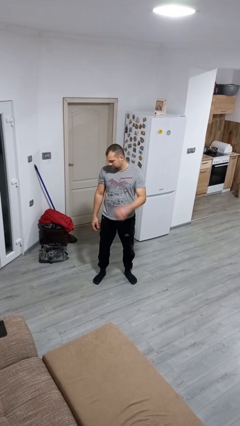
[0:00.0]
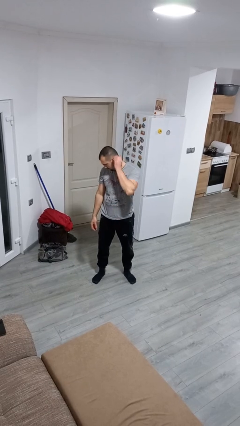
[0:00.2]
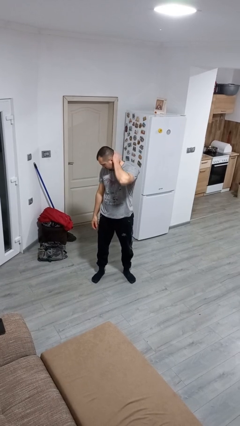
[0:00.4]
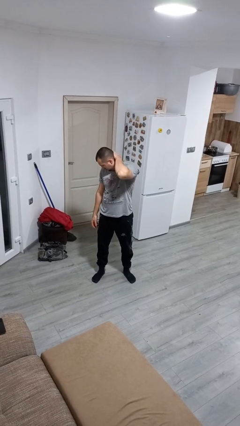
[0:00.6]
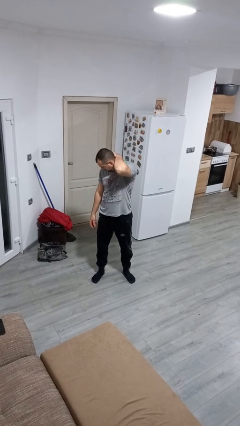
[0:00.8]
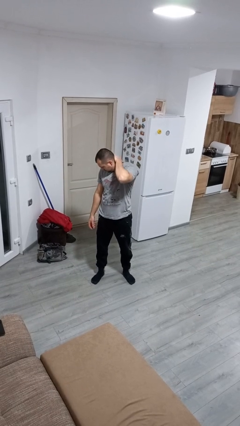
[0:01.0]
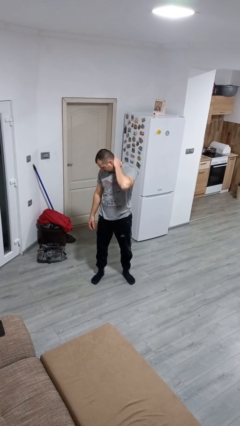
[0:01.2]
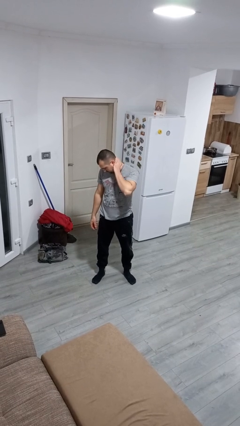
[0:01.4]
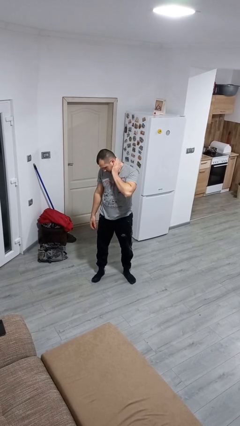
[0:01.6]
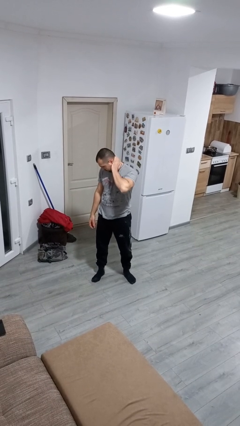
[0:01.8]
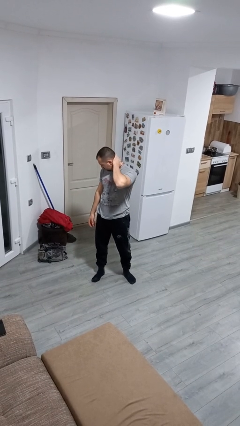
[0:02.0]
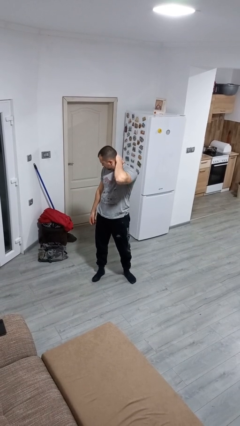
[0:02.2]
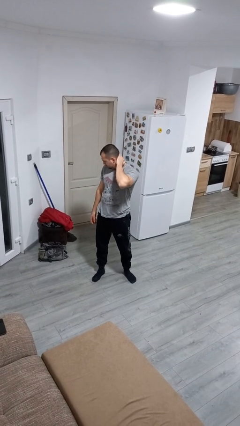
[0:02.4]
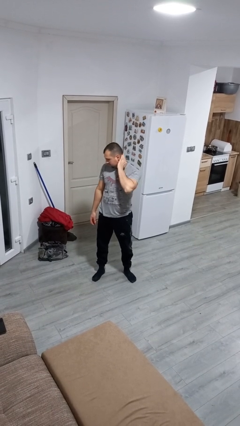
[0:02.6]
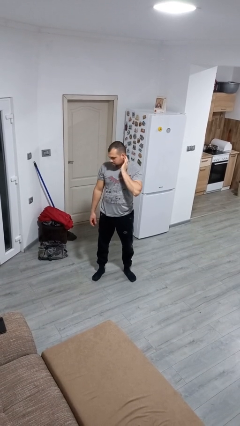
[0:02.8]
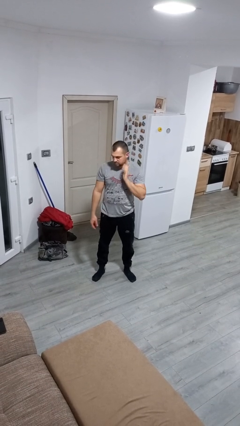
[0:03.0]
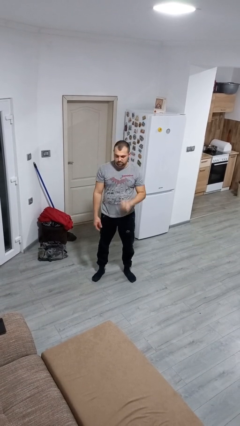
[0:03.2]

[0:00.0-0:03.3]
person rubs neck

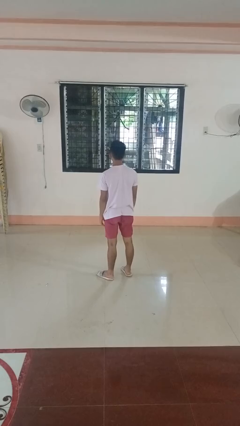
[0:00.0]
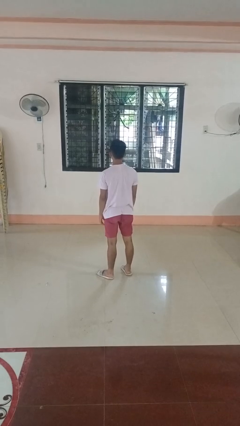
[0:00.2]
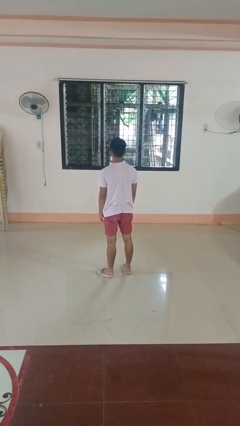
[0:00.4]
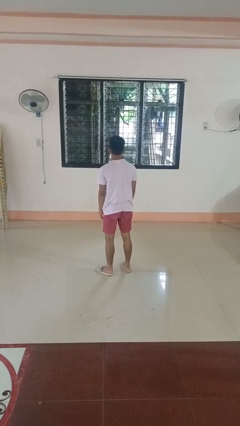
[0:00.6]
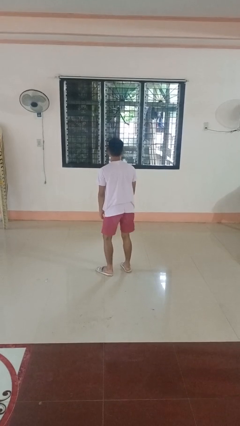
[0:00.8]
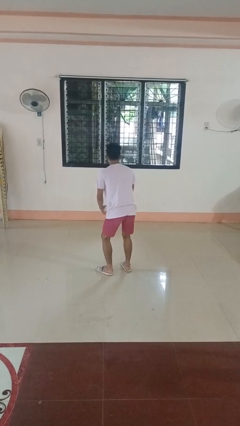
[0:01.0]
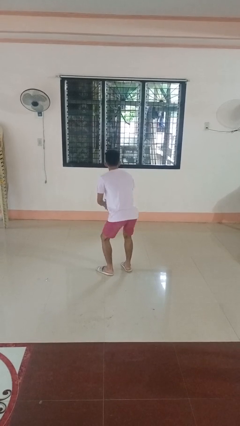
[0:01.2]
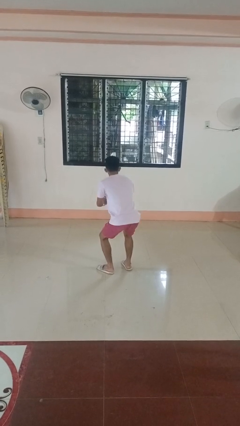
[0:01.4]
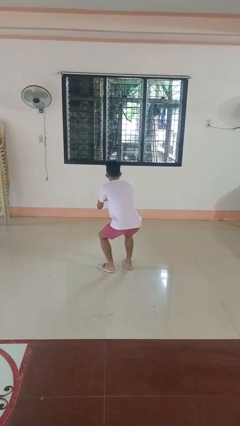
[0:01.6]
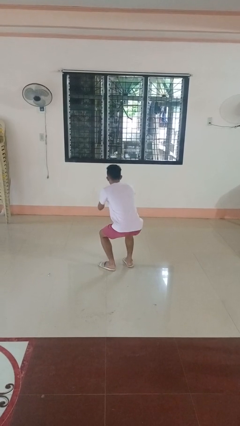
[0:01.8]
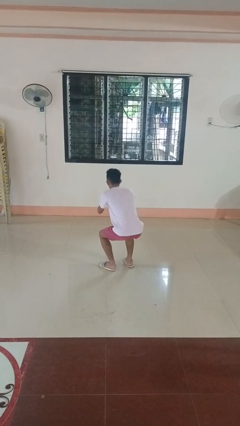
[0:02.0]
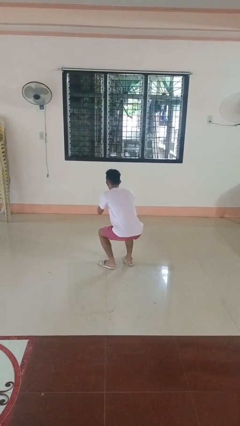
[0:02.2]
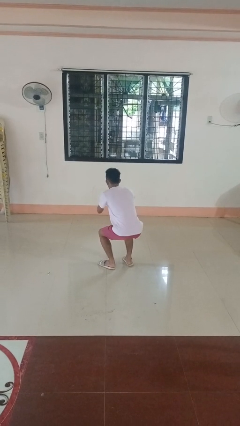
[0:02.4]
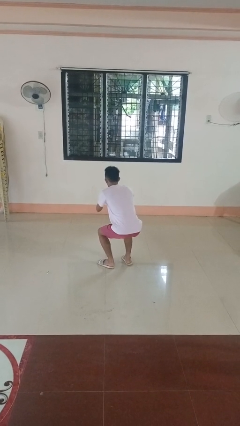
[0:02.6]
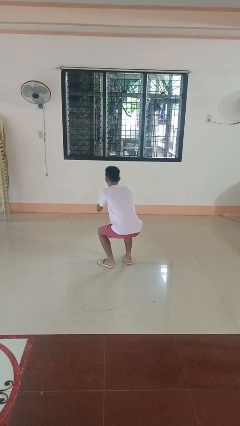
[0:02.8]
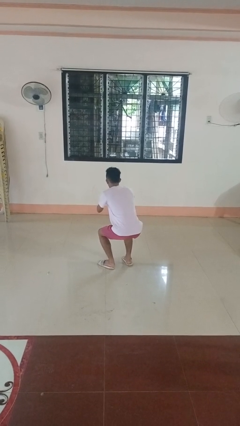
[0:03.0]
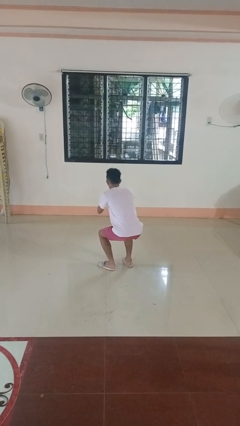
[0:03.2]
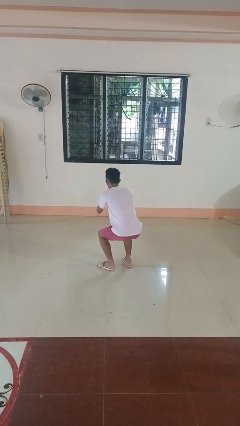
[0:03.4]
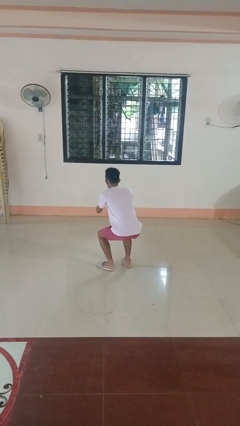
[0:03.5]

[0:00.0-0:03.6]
person squats

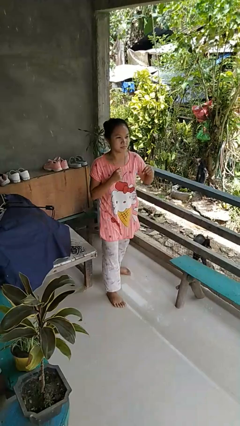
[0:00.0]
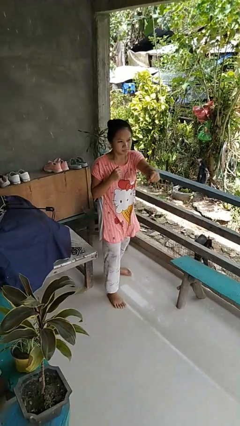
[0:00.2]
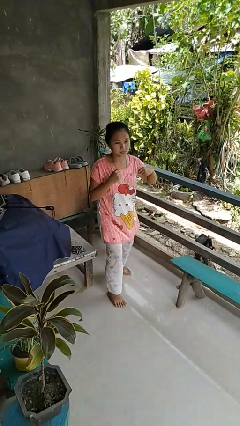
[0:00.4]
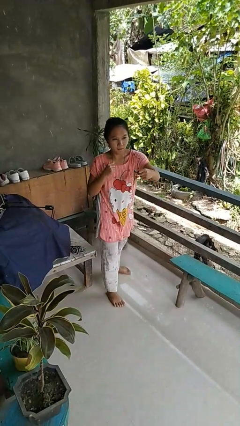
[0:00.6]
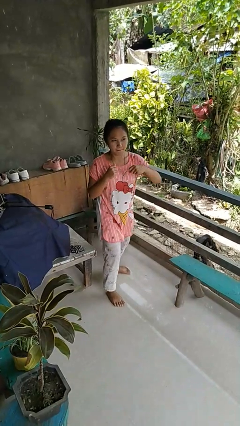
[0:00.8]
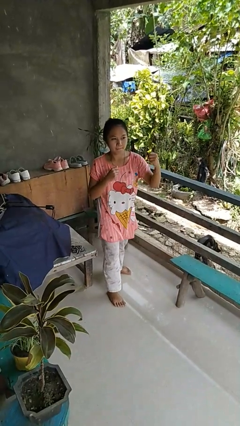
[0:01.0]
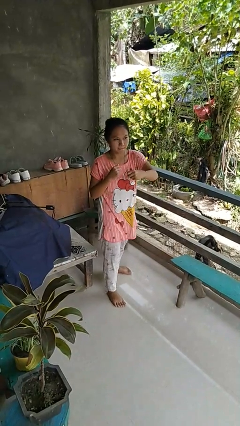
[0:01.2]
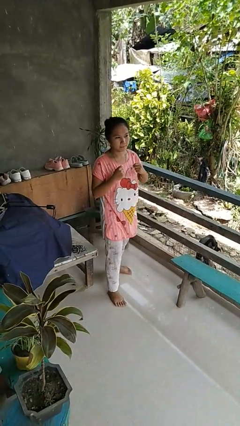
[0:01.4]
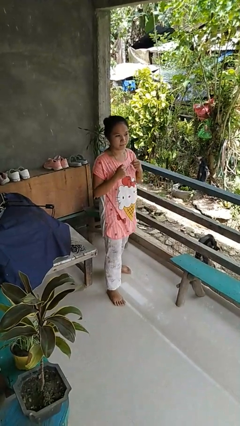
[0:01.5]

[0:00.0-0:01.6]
person punches

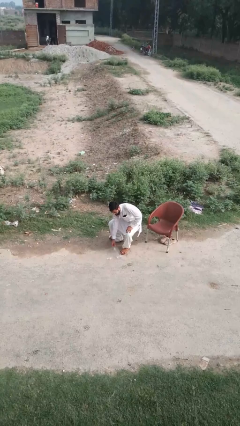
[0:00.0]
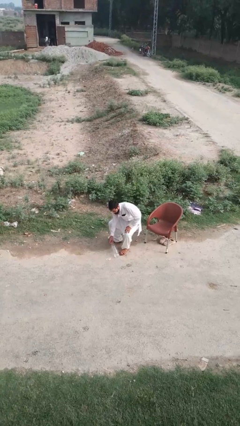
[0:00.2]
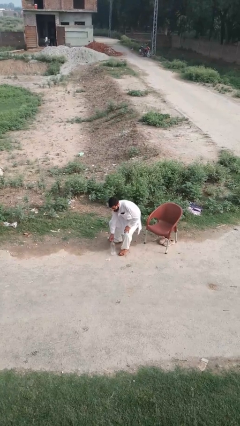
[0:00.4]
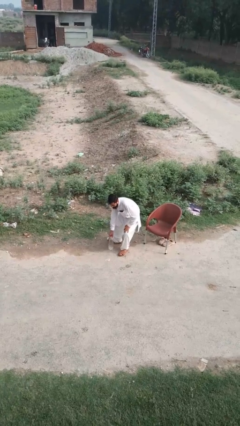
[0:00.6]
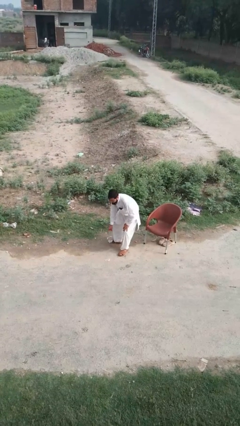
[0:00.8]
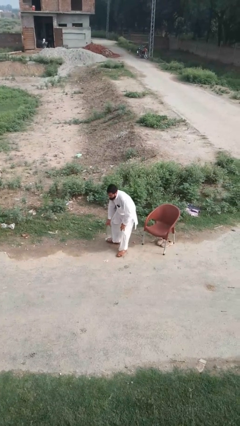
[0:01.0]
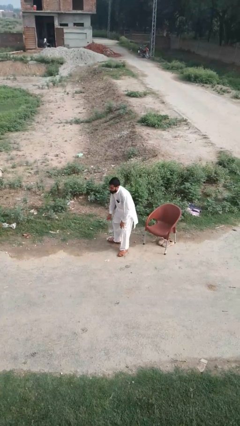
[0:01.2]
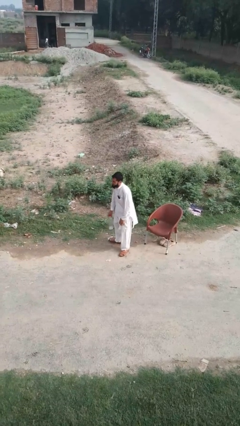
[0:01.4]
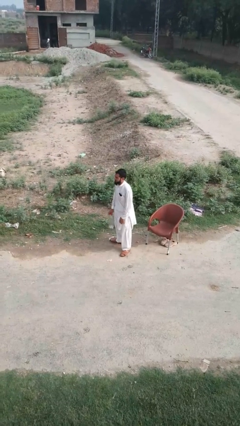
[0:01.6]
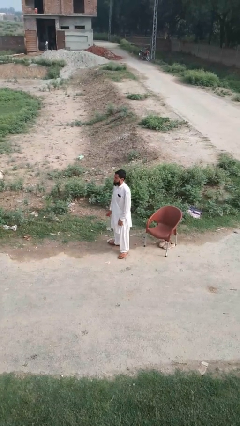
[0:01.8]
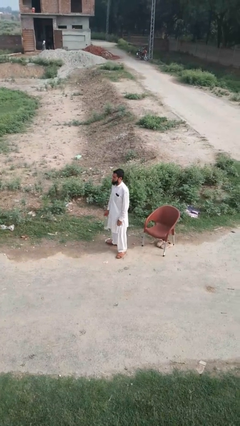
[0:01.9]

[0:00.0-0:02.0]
person picks up object from floor

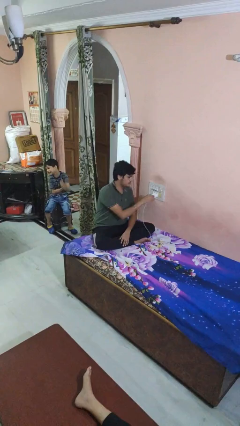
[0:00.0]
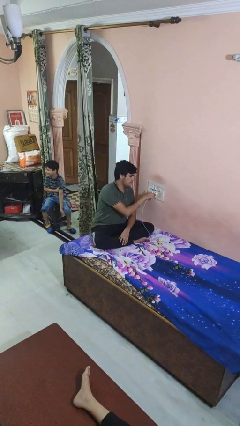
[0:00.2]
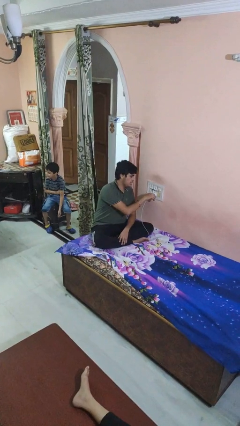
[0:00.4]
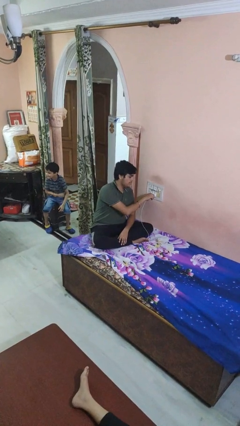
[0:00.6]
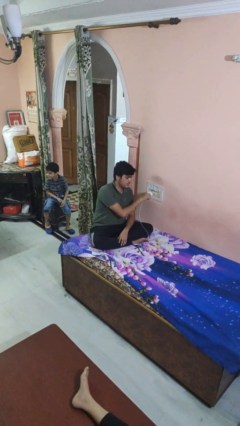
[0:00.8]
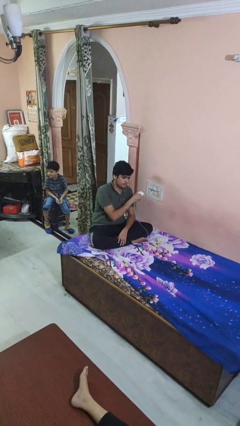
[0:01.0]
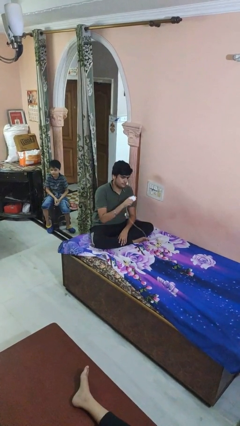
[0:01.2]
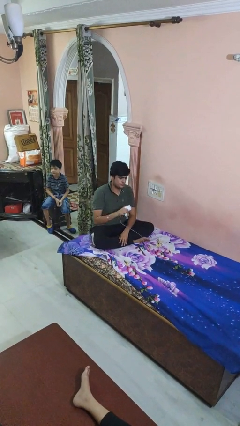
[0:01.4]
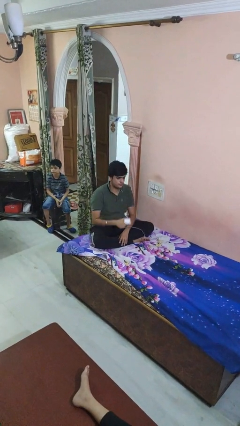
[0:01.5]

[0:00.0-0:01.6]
person unplugs from electrical socket

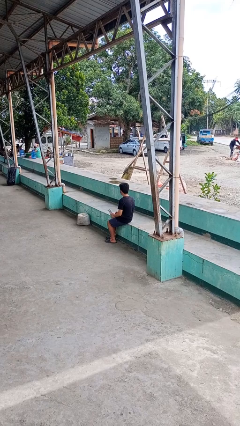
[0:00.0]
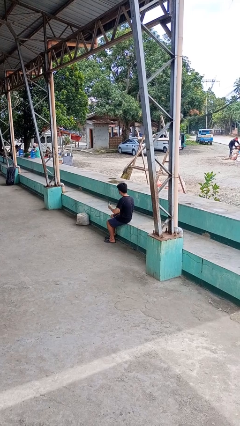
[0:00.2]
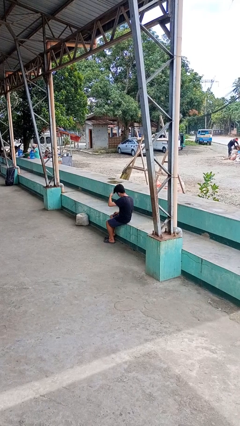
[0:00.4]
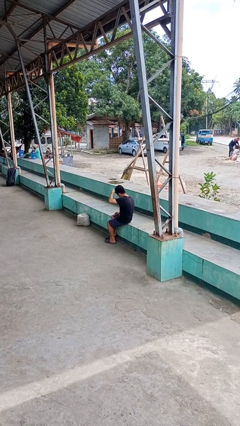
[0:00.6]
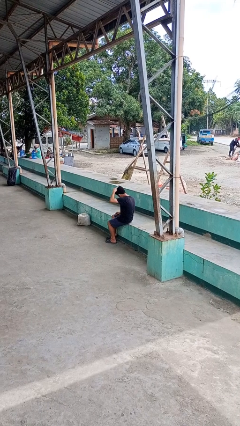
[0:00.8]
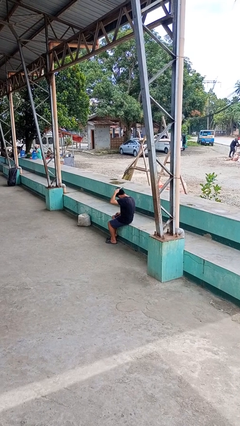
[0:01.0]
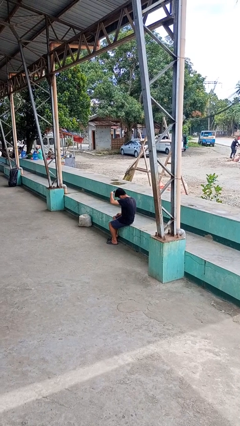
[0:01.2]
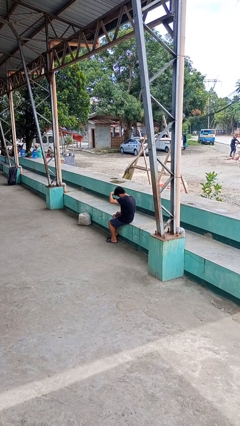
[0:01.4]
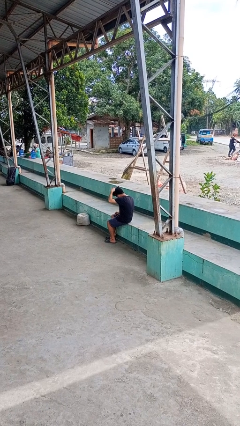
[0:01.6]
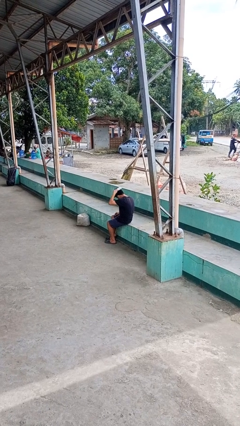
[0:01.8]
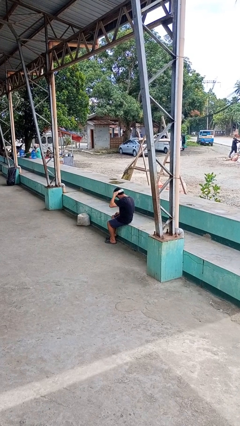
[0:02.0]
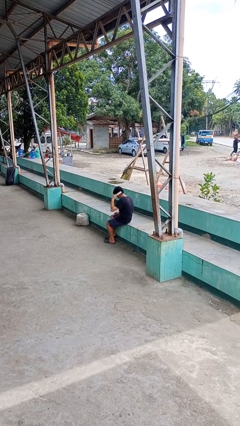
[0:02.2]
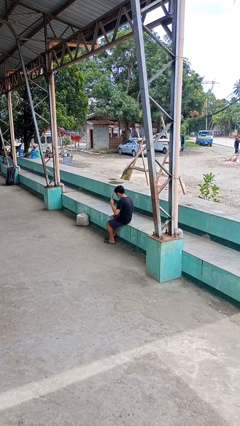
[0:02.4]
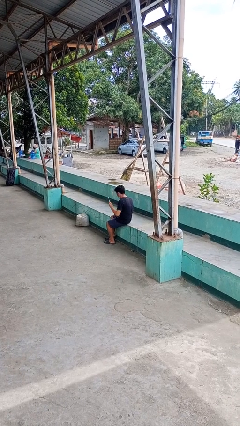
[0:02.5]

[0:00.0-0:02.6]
person brushes hair

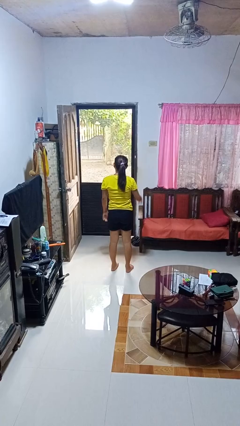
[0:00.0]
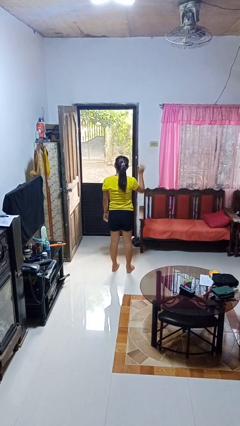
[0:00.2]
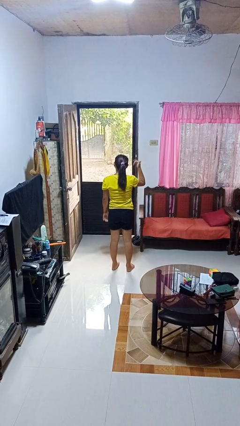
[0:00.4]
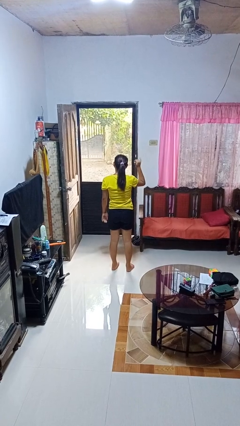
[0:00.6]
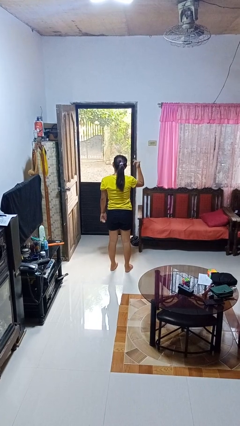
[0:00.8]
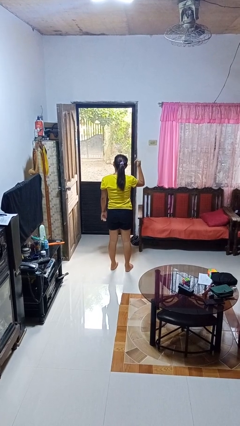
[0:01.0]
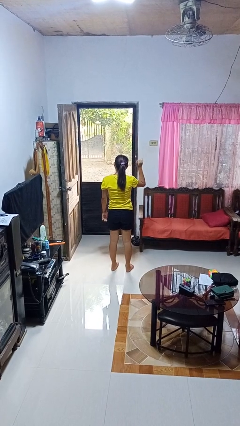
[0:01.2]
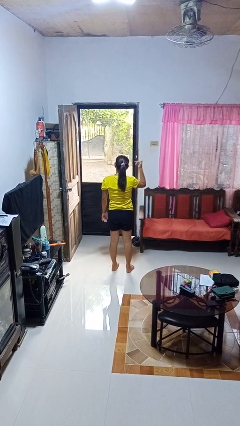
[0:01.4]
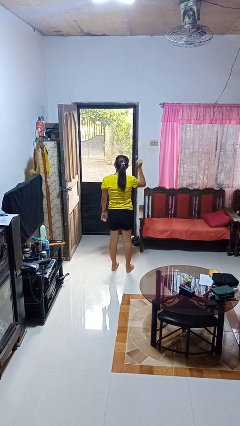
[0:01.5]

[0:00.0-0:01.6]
person gestures hang loose

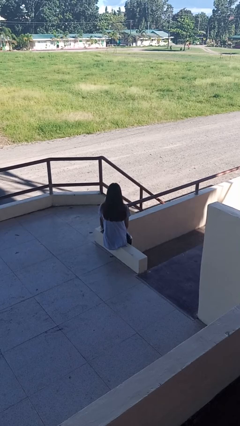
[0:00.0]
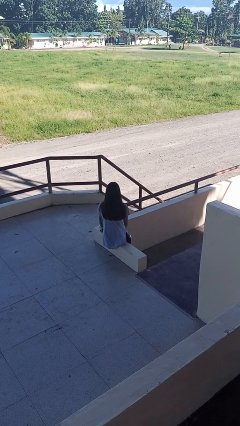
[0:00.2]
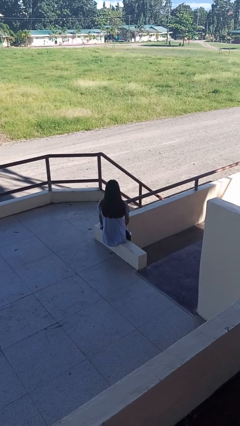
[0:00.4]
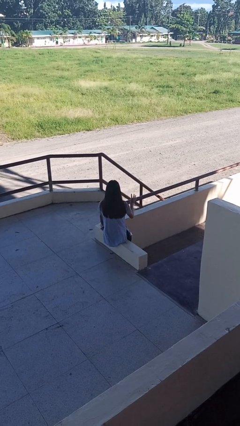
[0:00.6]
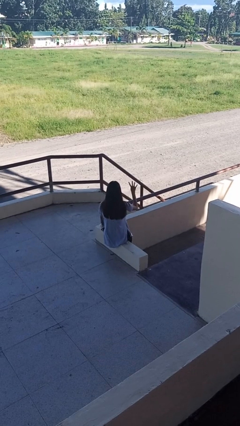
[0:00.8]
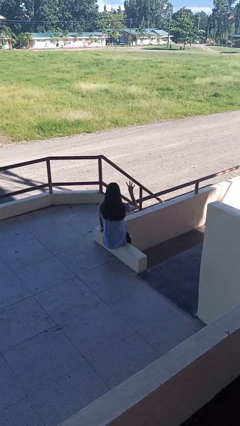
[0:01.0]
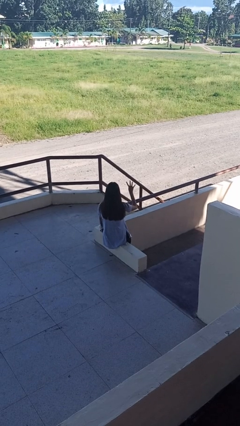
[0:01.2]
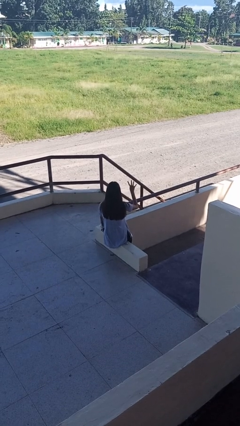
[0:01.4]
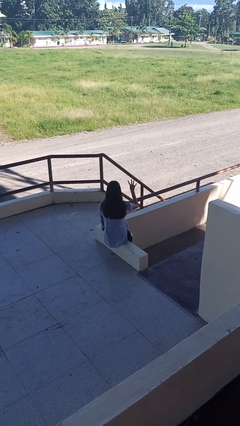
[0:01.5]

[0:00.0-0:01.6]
person gestures number four
